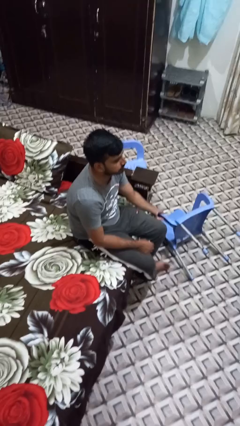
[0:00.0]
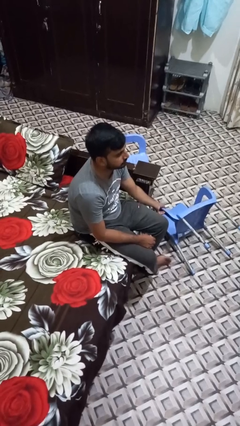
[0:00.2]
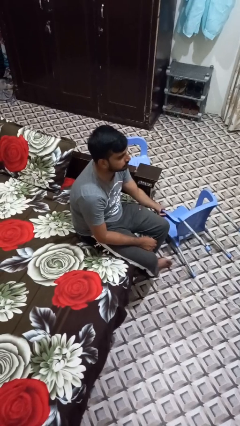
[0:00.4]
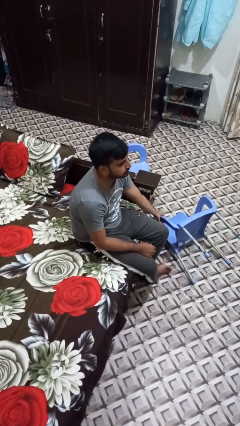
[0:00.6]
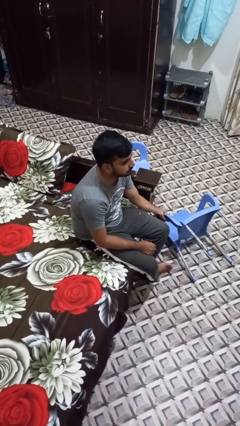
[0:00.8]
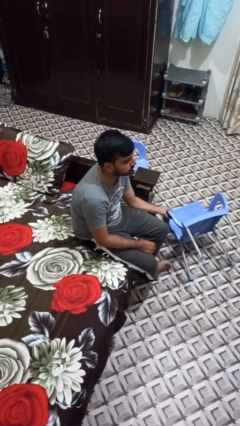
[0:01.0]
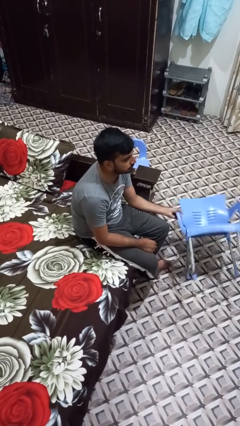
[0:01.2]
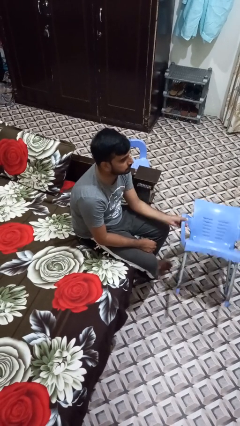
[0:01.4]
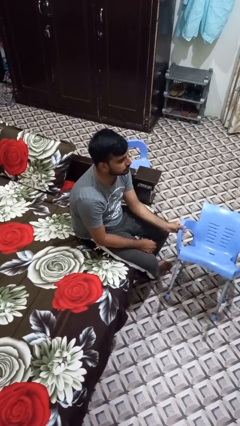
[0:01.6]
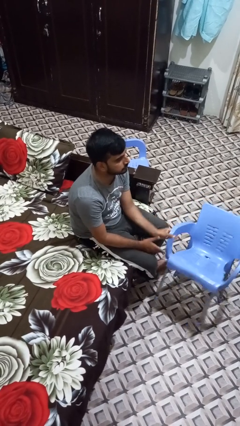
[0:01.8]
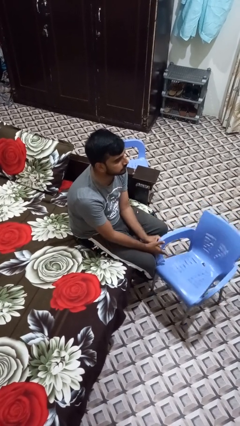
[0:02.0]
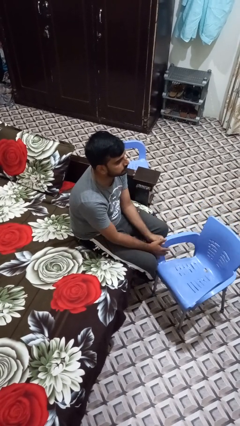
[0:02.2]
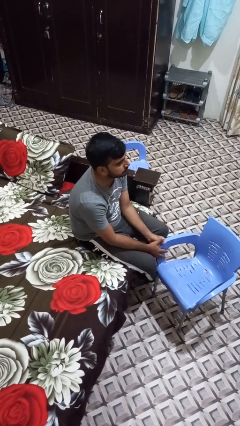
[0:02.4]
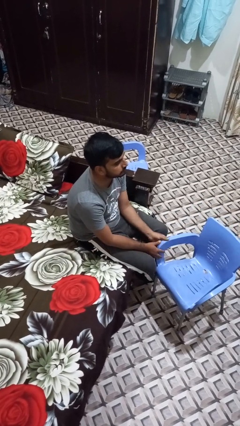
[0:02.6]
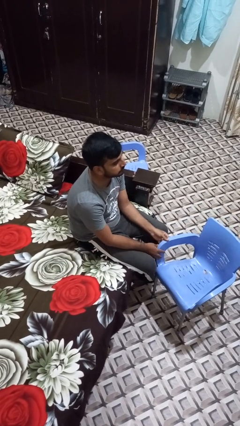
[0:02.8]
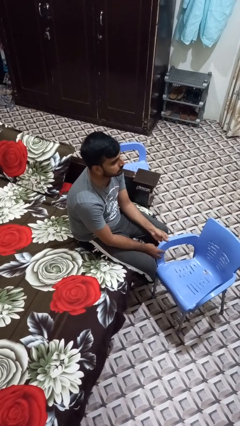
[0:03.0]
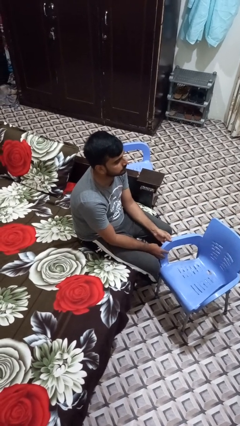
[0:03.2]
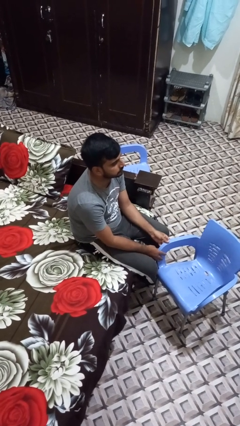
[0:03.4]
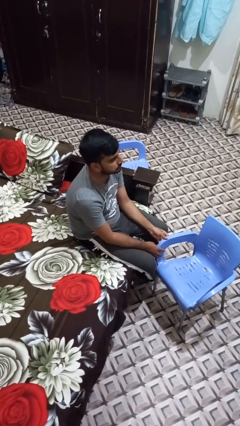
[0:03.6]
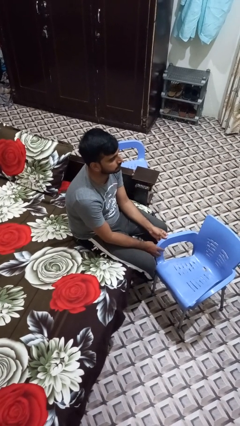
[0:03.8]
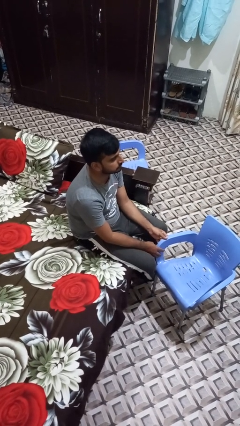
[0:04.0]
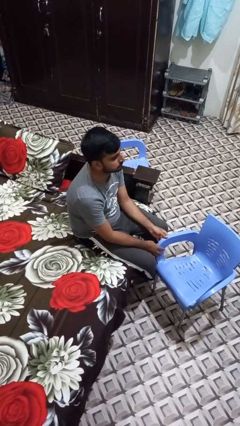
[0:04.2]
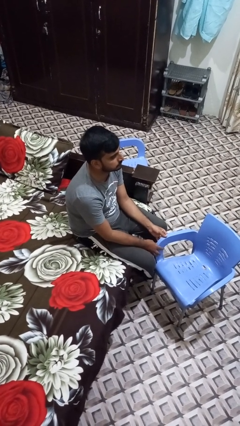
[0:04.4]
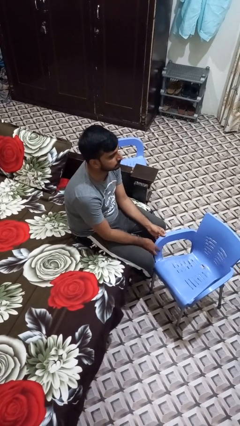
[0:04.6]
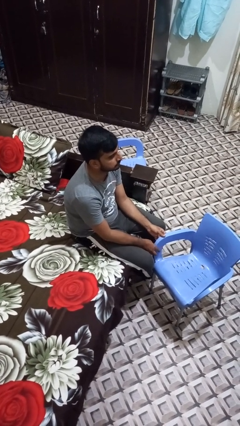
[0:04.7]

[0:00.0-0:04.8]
person sets upright furniture

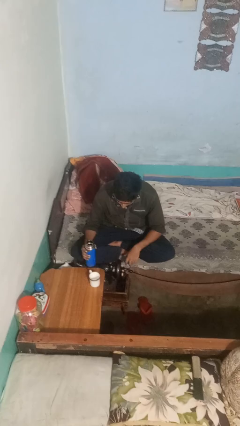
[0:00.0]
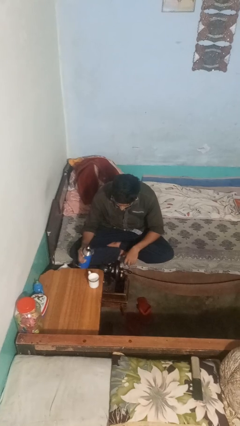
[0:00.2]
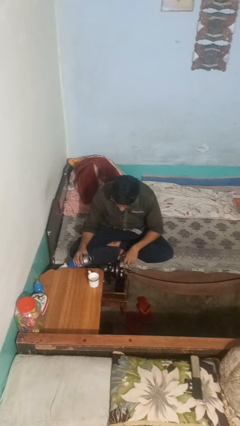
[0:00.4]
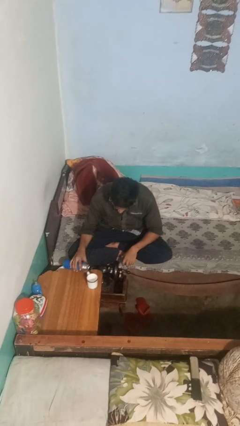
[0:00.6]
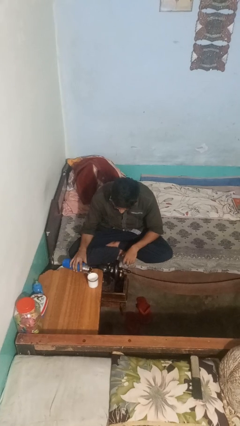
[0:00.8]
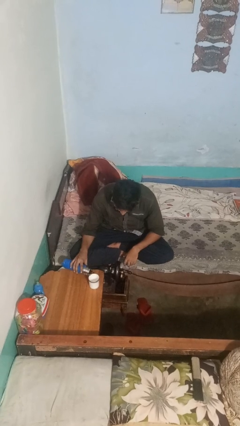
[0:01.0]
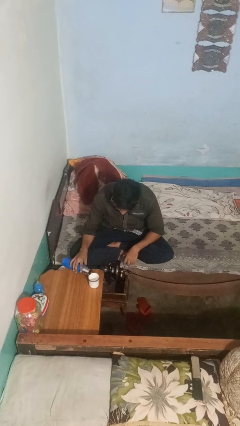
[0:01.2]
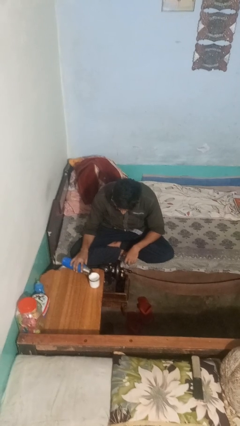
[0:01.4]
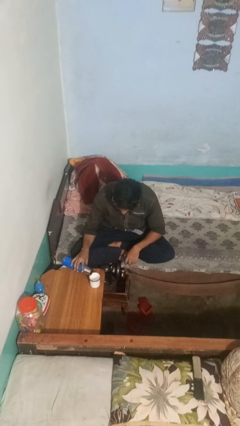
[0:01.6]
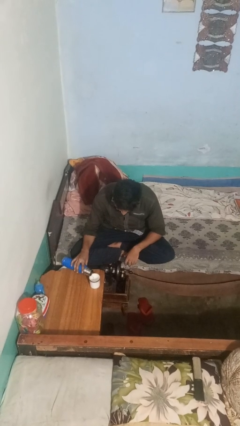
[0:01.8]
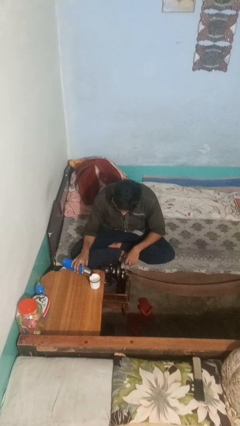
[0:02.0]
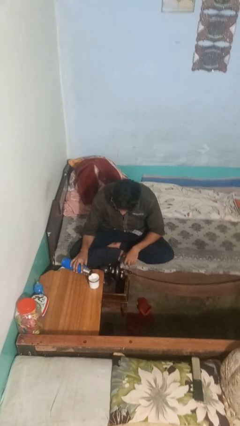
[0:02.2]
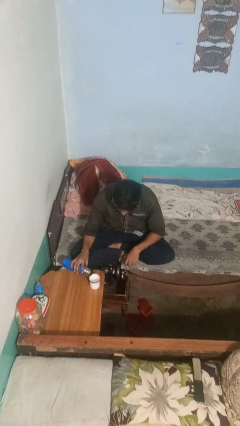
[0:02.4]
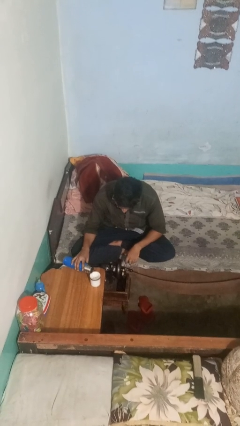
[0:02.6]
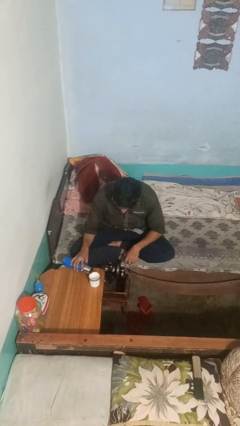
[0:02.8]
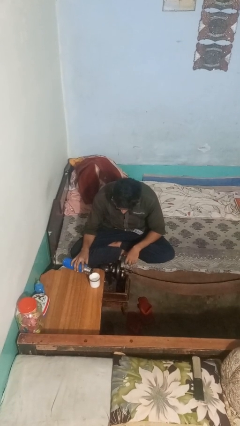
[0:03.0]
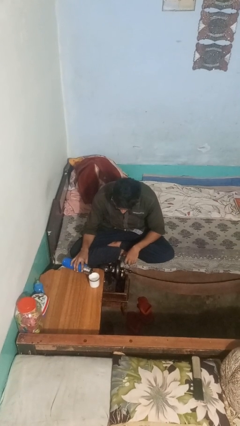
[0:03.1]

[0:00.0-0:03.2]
person pours liquid into cup

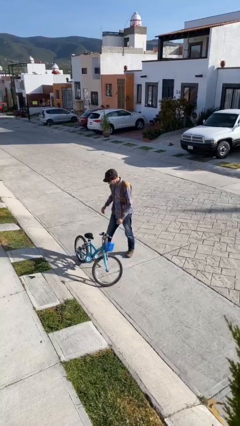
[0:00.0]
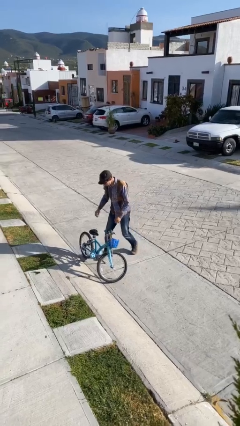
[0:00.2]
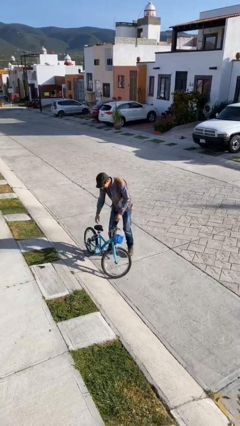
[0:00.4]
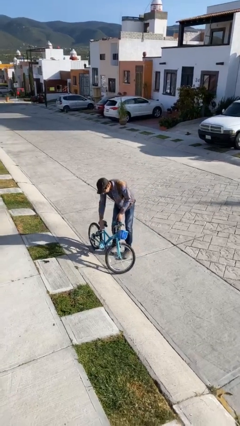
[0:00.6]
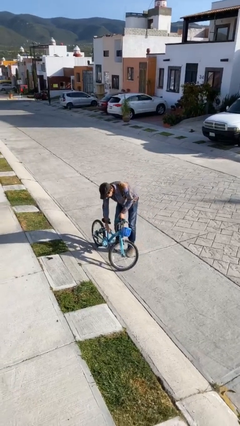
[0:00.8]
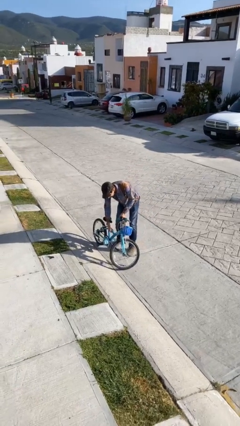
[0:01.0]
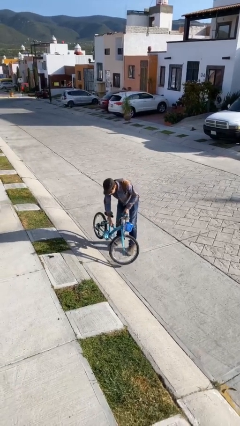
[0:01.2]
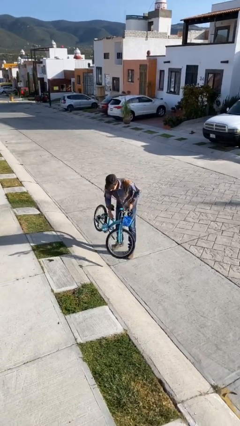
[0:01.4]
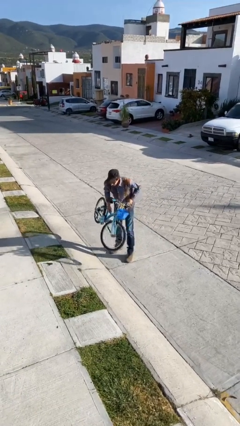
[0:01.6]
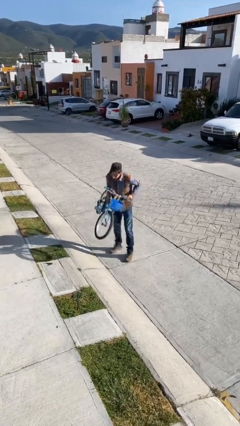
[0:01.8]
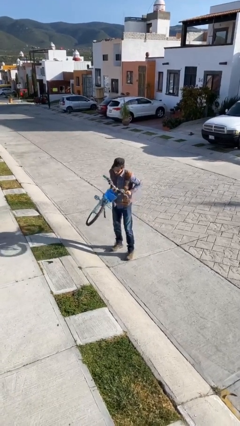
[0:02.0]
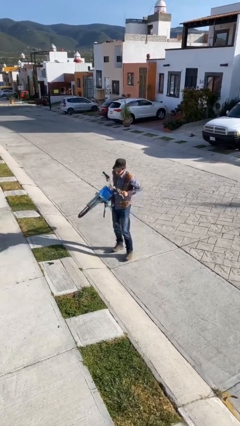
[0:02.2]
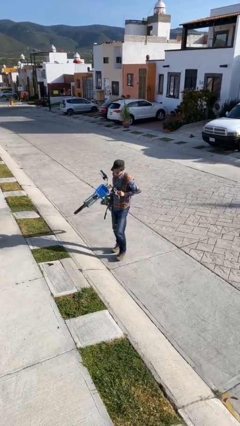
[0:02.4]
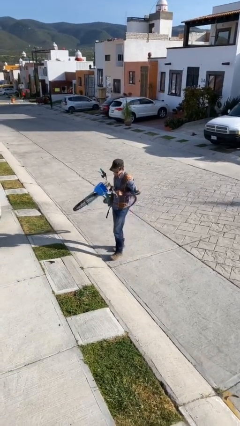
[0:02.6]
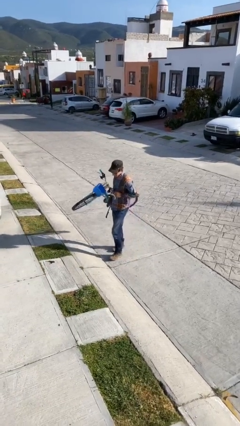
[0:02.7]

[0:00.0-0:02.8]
person picks up object from floor

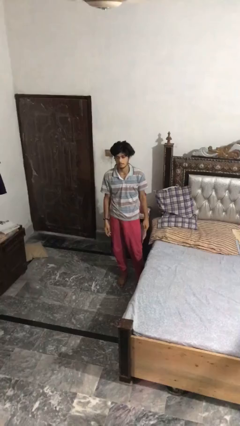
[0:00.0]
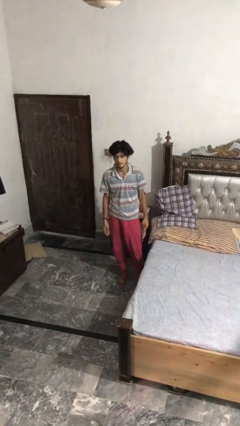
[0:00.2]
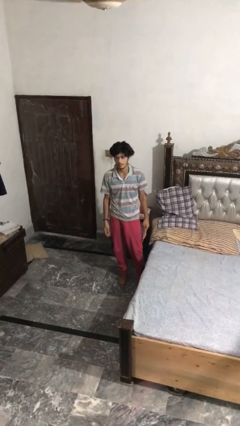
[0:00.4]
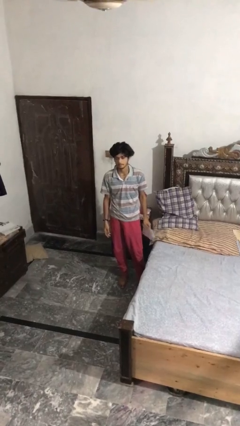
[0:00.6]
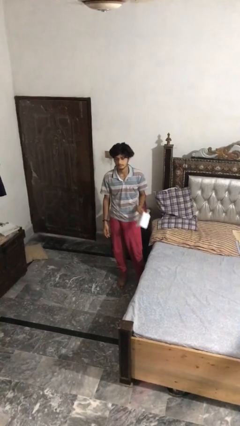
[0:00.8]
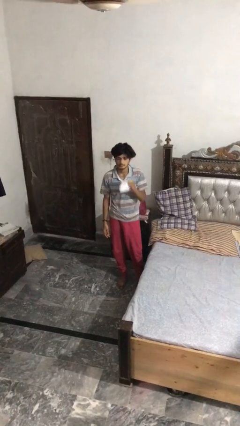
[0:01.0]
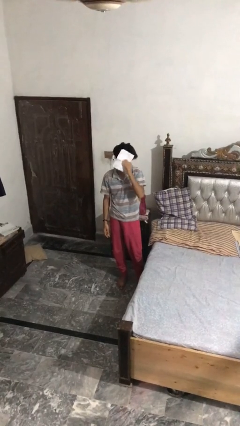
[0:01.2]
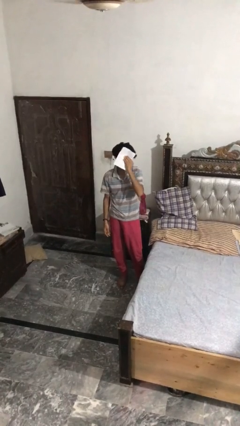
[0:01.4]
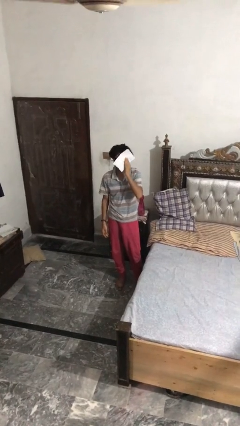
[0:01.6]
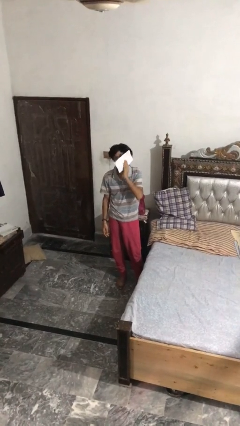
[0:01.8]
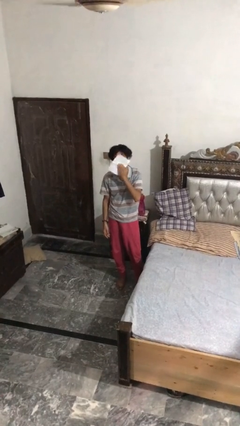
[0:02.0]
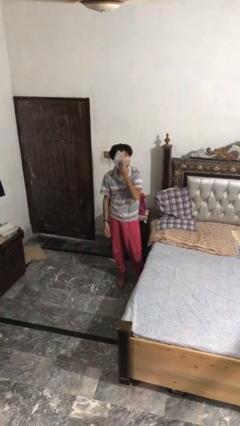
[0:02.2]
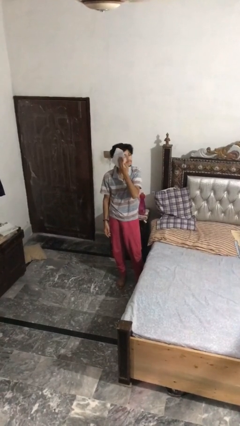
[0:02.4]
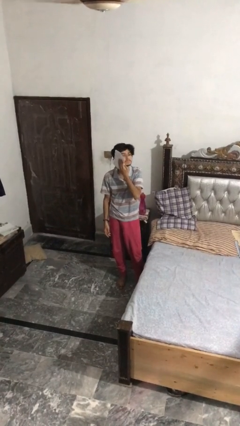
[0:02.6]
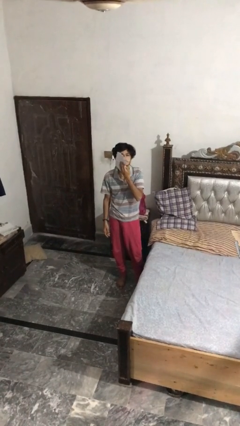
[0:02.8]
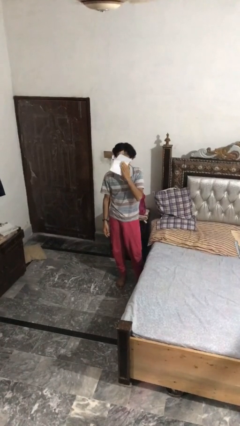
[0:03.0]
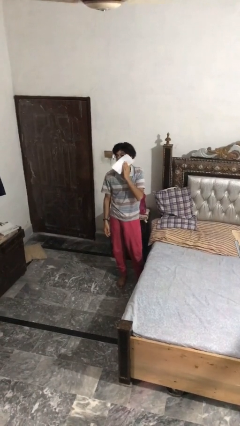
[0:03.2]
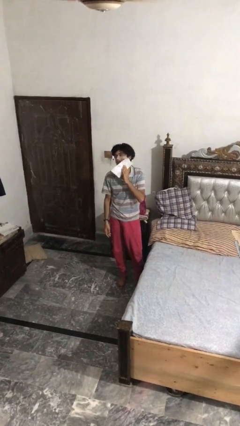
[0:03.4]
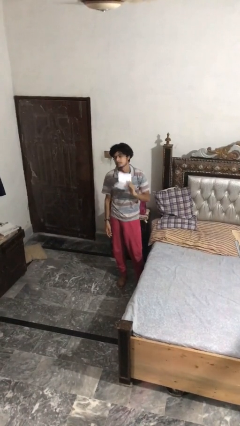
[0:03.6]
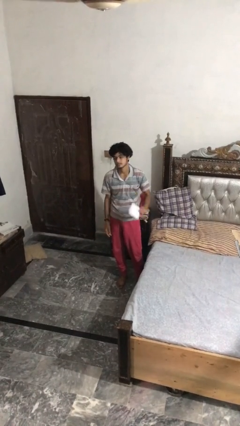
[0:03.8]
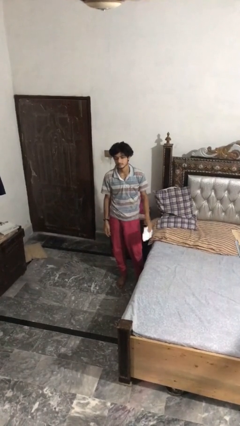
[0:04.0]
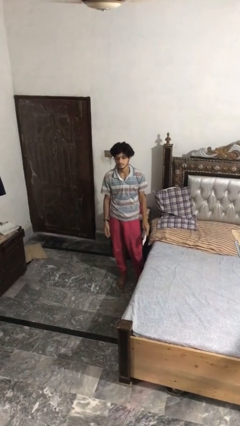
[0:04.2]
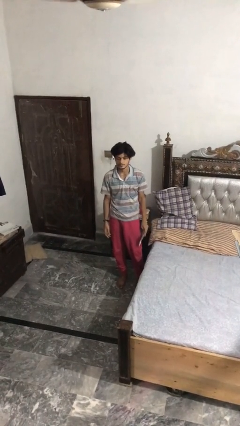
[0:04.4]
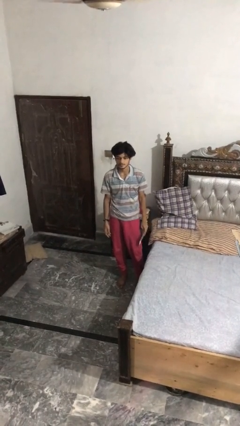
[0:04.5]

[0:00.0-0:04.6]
person wipes mouth with napkin

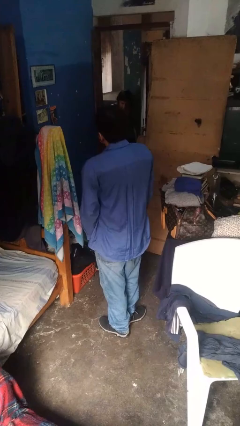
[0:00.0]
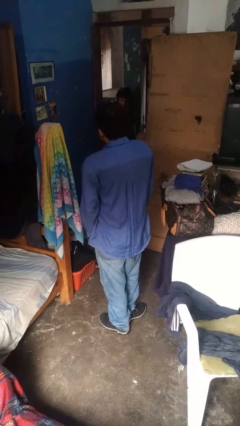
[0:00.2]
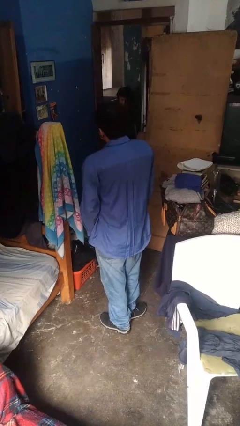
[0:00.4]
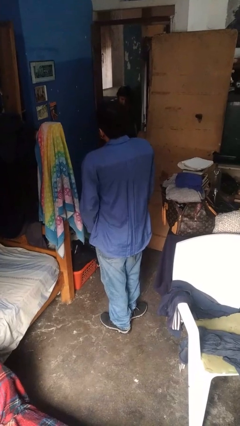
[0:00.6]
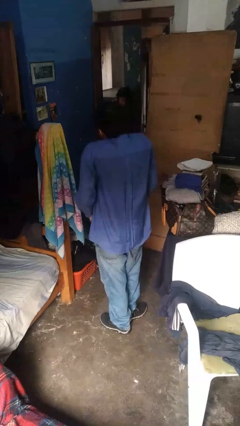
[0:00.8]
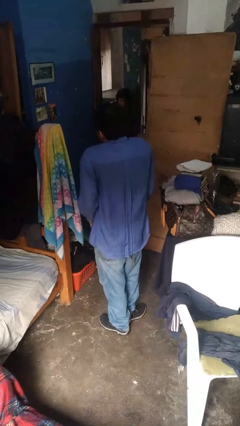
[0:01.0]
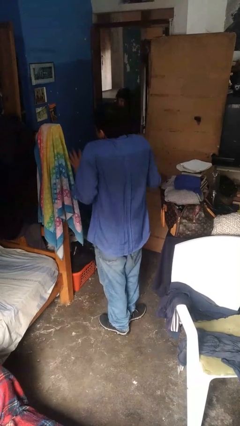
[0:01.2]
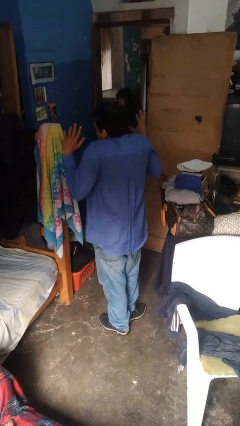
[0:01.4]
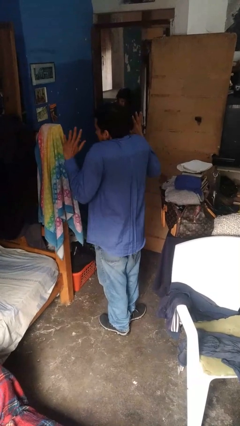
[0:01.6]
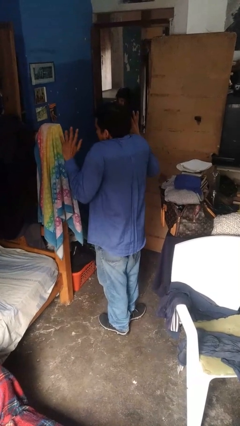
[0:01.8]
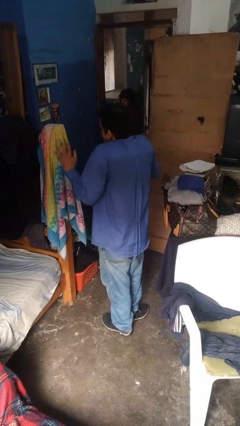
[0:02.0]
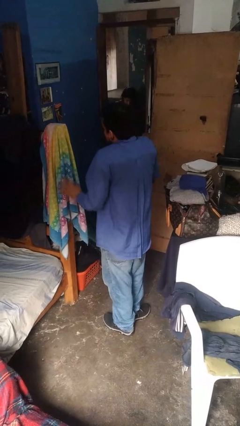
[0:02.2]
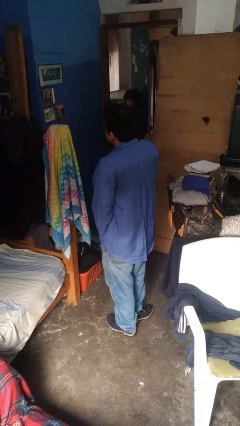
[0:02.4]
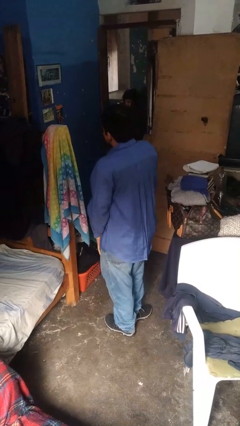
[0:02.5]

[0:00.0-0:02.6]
person shrugs
